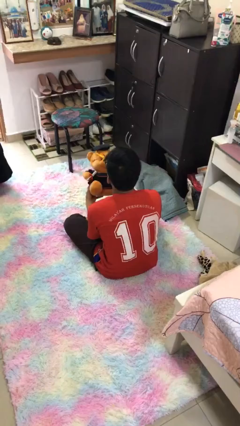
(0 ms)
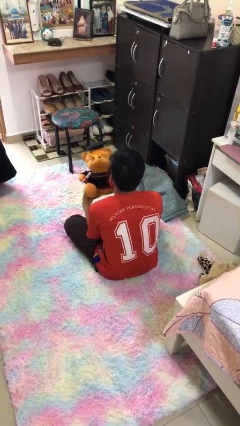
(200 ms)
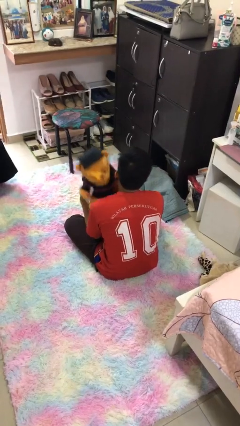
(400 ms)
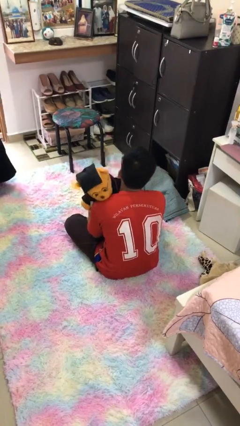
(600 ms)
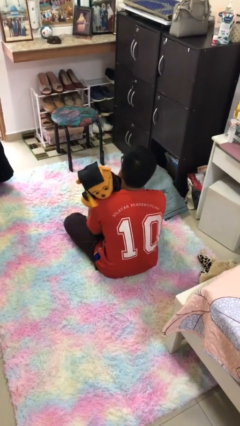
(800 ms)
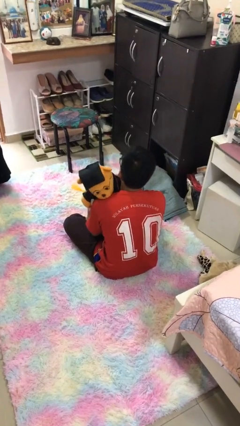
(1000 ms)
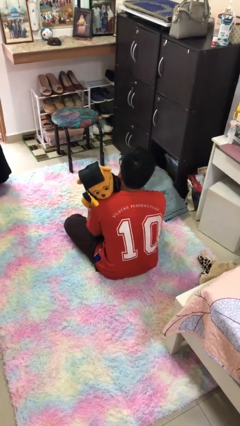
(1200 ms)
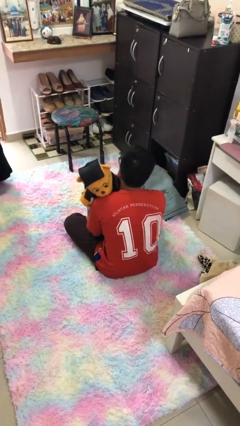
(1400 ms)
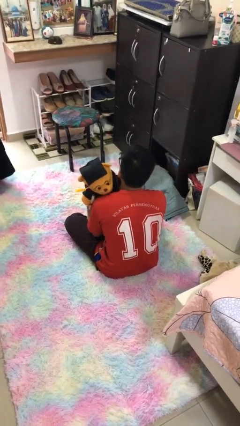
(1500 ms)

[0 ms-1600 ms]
person hugs stuffed animal

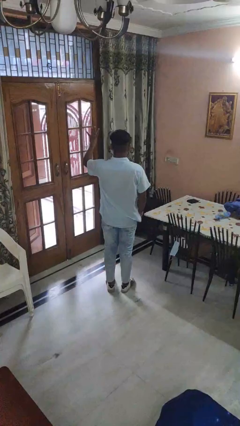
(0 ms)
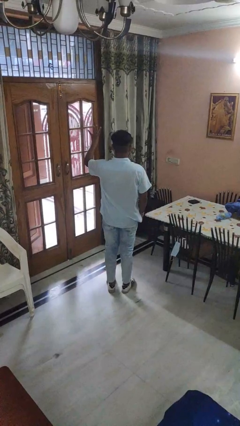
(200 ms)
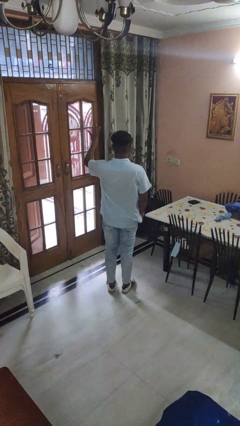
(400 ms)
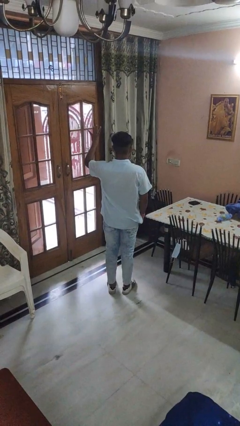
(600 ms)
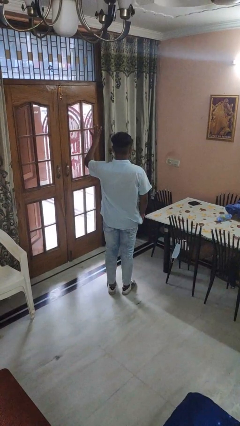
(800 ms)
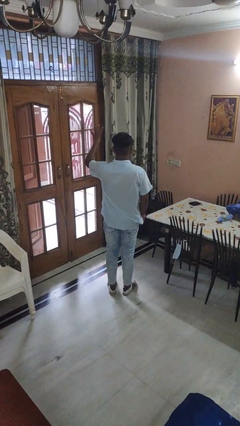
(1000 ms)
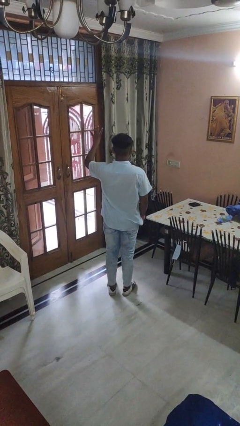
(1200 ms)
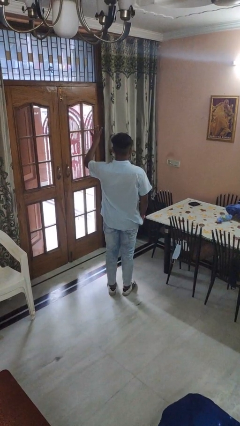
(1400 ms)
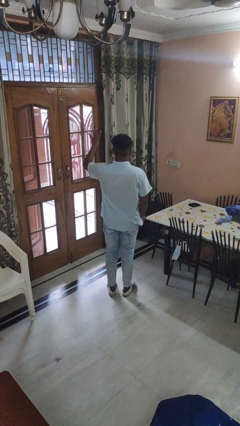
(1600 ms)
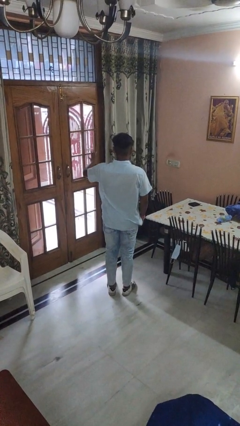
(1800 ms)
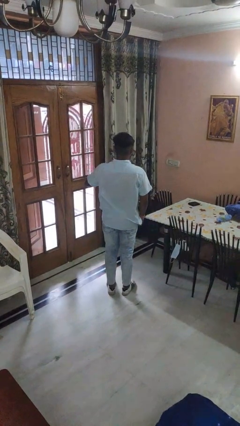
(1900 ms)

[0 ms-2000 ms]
person gestures number four

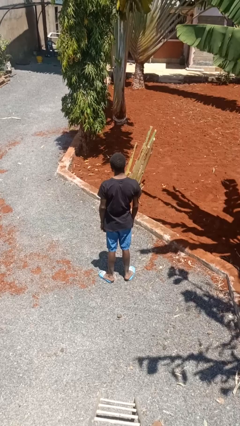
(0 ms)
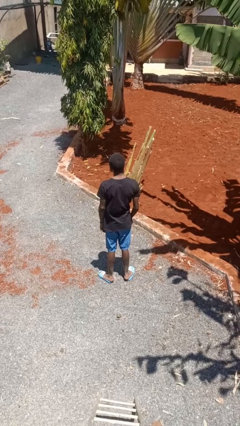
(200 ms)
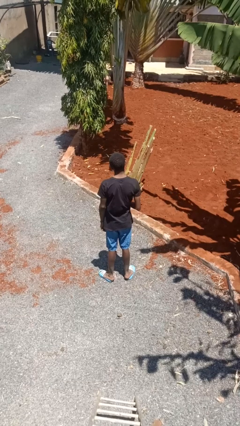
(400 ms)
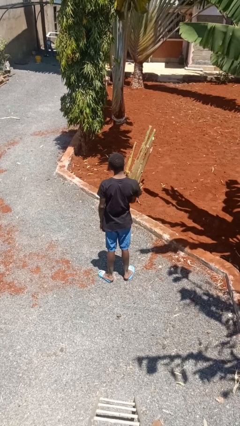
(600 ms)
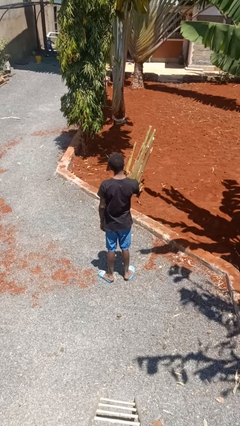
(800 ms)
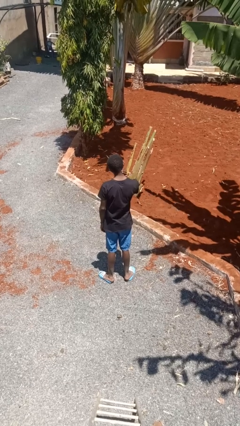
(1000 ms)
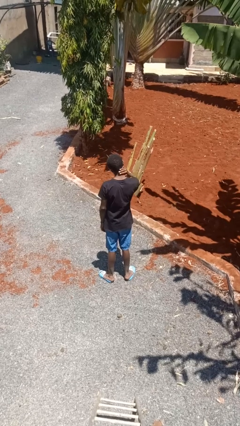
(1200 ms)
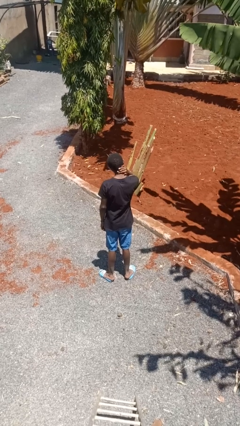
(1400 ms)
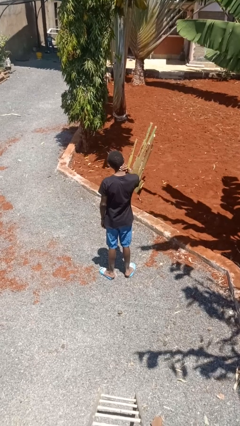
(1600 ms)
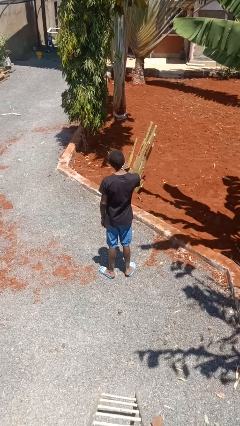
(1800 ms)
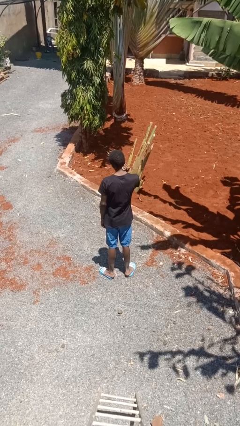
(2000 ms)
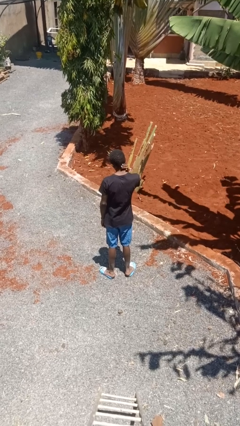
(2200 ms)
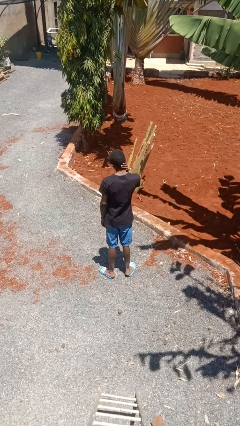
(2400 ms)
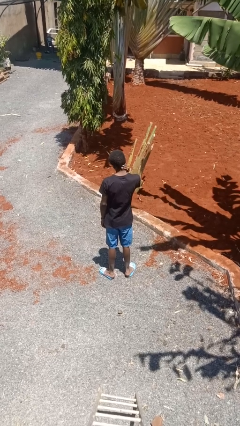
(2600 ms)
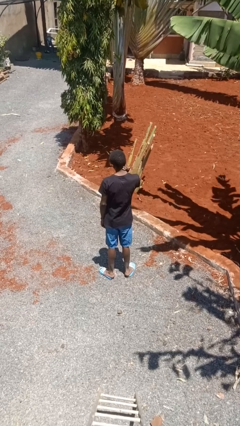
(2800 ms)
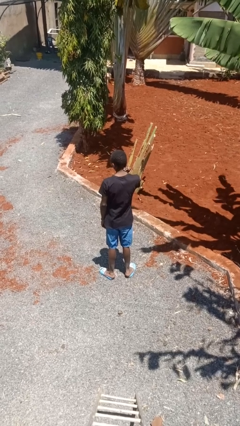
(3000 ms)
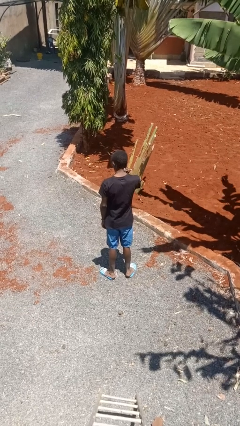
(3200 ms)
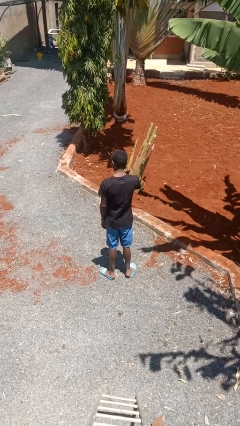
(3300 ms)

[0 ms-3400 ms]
person rubs neck

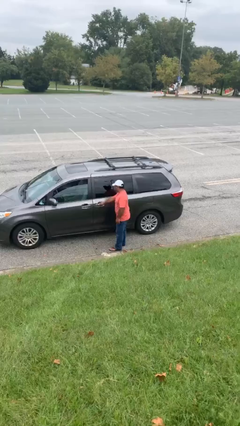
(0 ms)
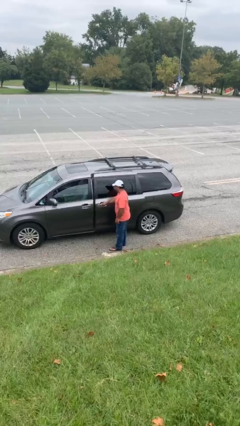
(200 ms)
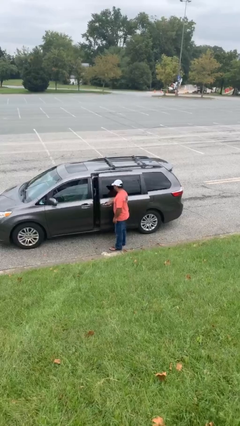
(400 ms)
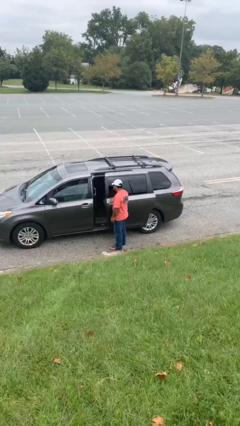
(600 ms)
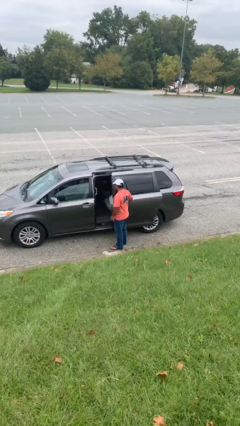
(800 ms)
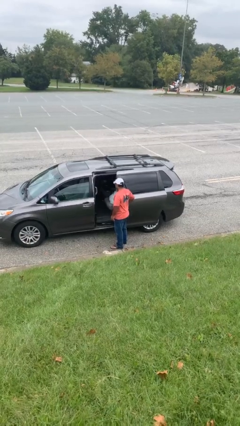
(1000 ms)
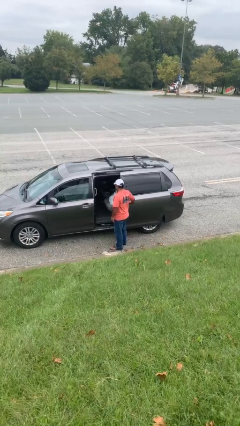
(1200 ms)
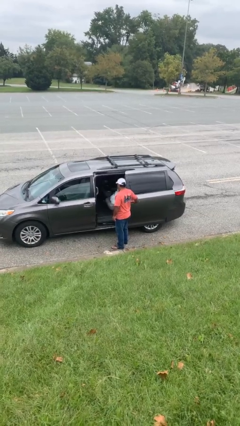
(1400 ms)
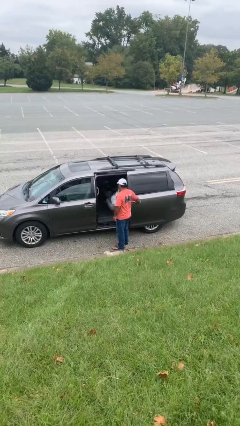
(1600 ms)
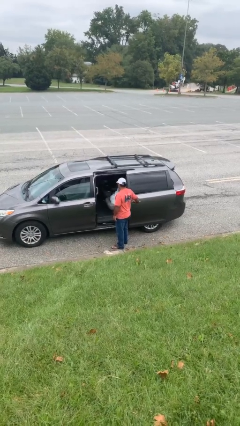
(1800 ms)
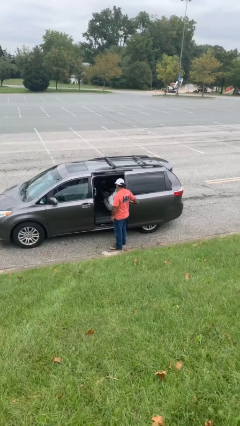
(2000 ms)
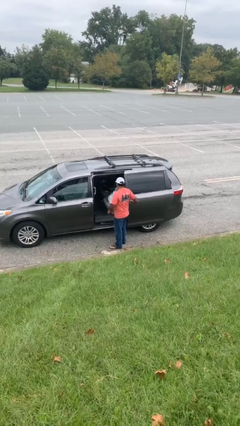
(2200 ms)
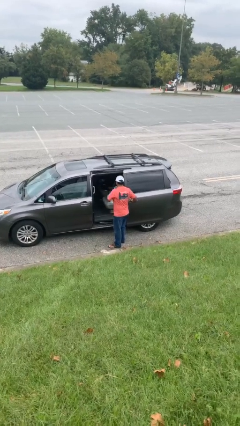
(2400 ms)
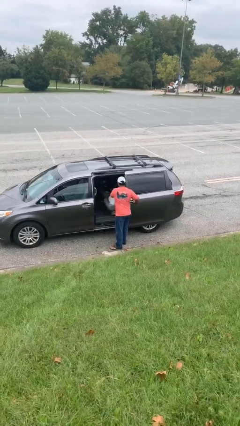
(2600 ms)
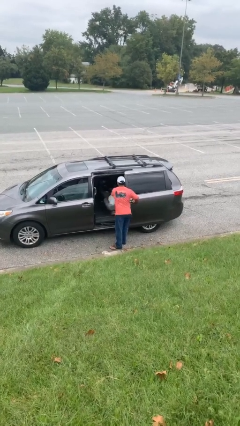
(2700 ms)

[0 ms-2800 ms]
person opens car door

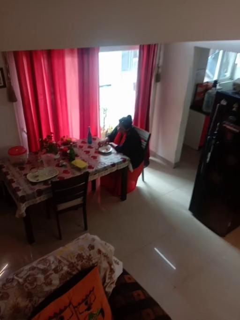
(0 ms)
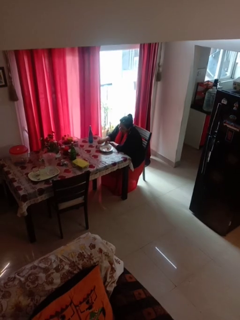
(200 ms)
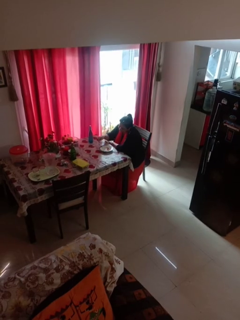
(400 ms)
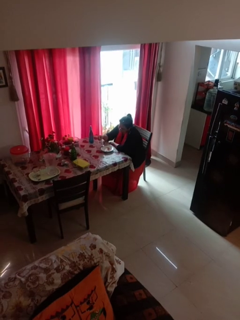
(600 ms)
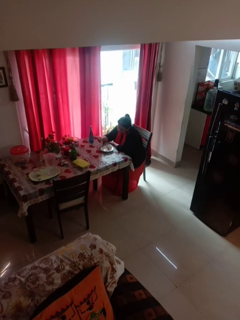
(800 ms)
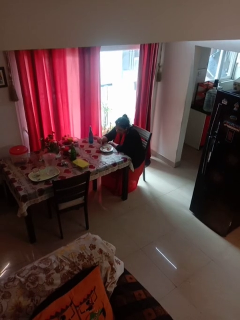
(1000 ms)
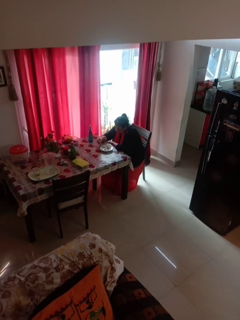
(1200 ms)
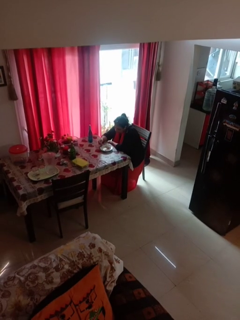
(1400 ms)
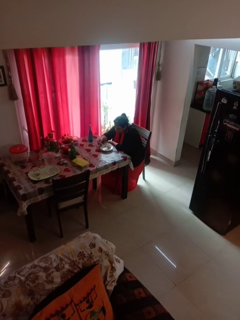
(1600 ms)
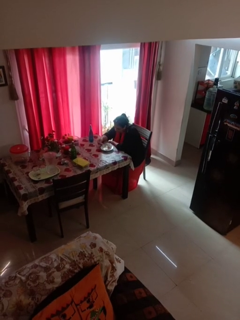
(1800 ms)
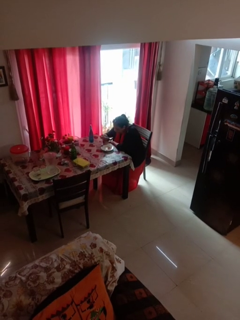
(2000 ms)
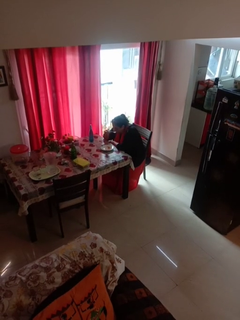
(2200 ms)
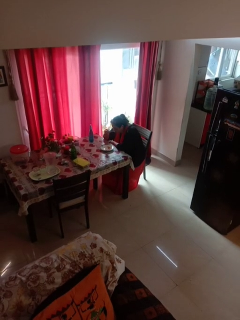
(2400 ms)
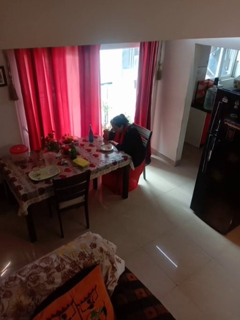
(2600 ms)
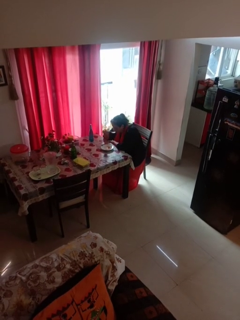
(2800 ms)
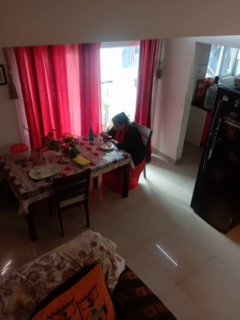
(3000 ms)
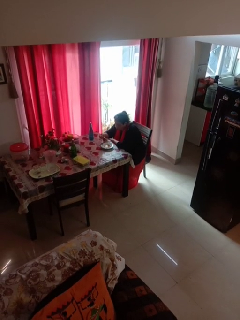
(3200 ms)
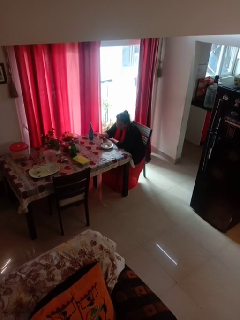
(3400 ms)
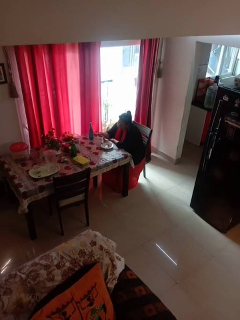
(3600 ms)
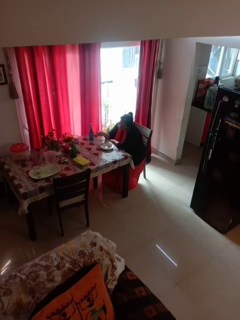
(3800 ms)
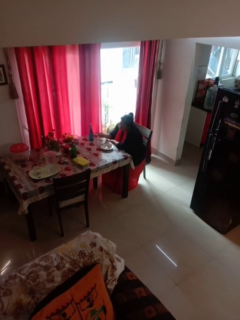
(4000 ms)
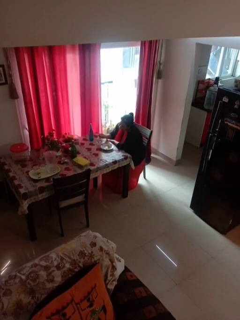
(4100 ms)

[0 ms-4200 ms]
person eats with utensil

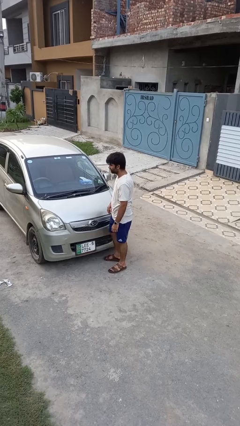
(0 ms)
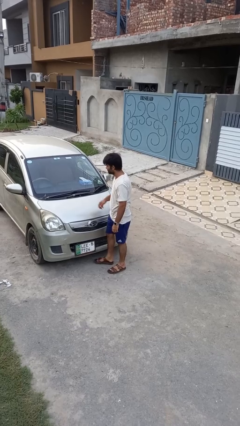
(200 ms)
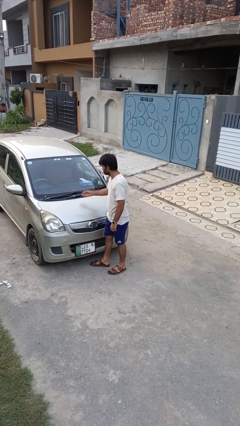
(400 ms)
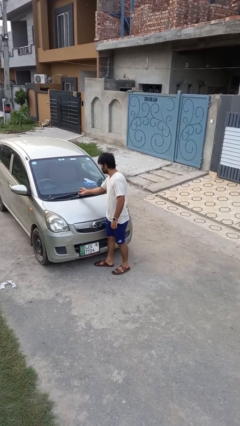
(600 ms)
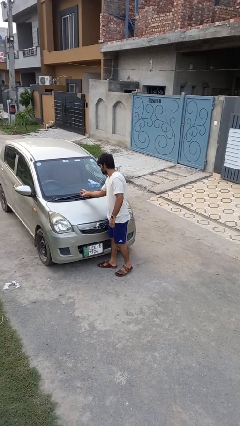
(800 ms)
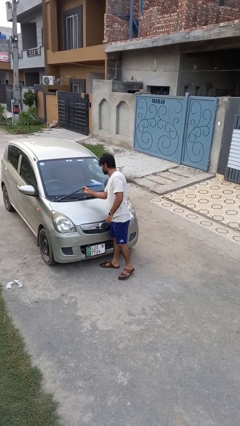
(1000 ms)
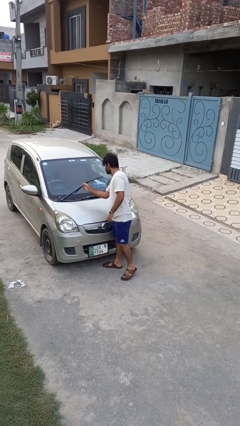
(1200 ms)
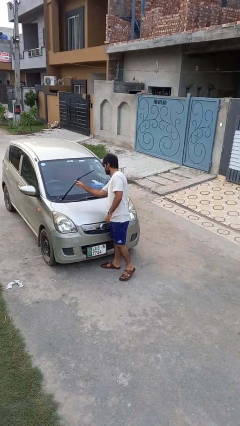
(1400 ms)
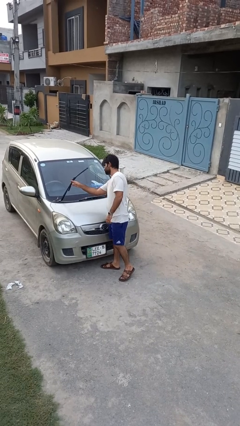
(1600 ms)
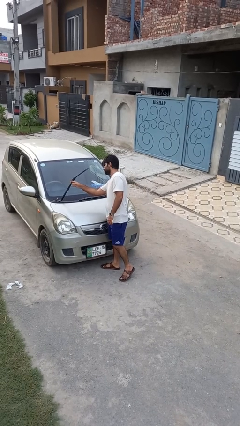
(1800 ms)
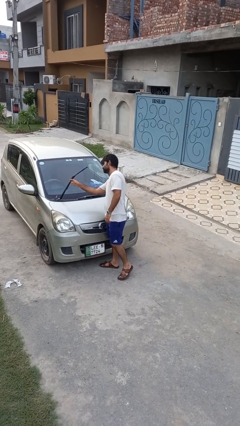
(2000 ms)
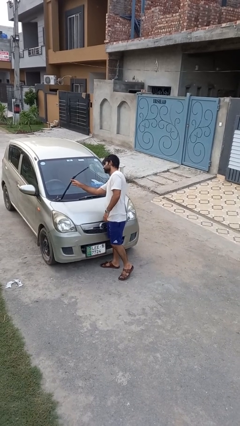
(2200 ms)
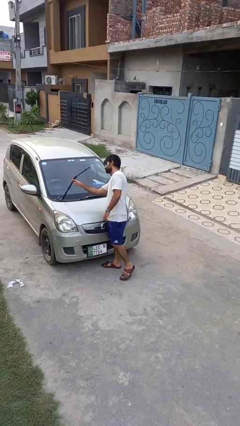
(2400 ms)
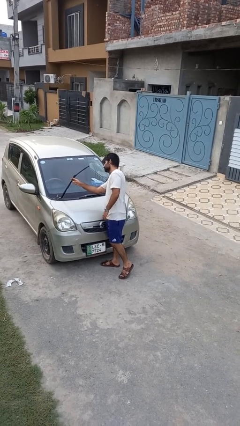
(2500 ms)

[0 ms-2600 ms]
person flips up car wipers

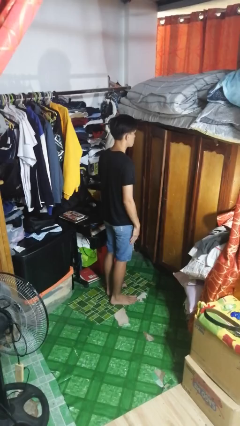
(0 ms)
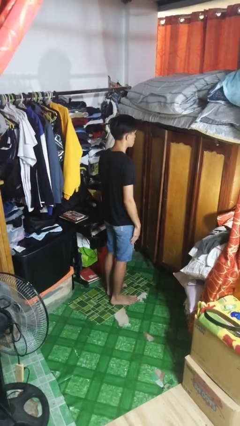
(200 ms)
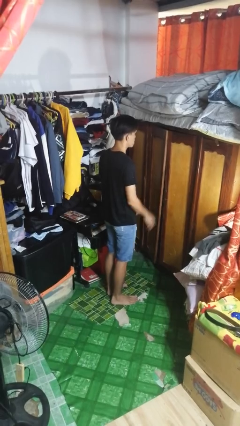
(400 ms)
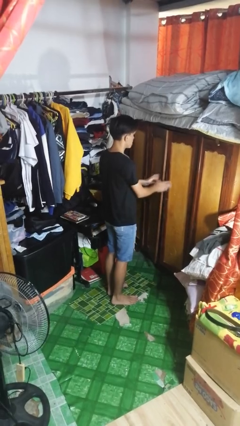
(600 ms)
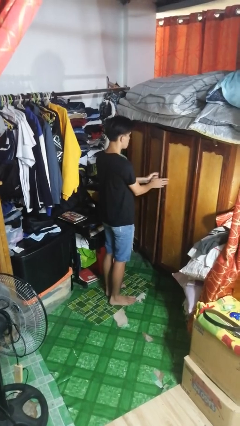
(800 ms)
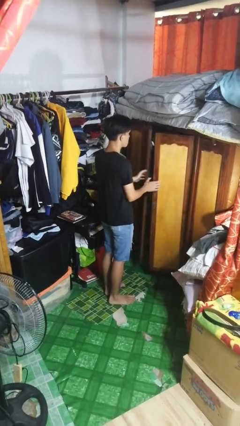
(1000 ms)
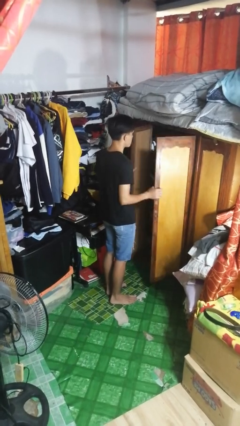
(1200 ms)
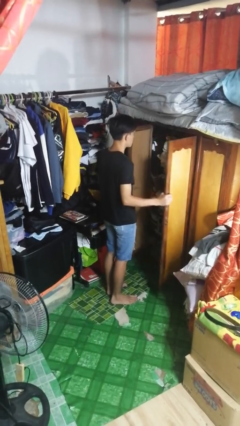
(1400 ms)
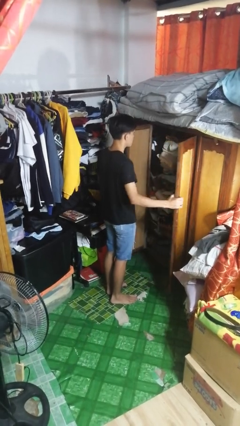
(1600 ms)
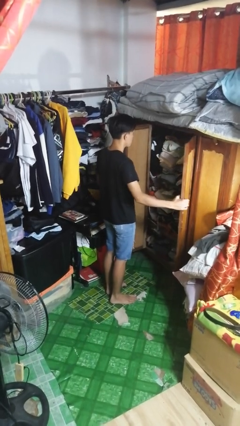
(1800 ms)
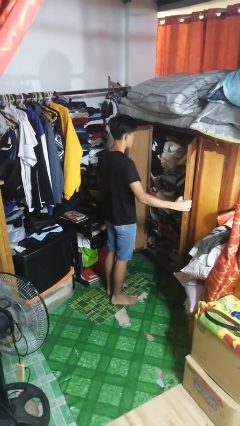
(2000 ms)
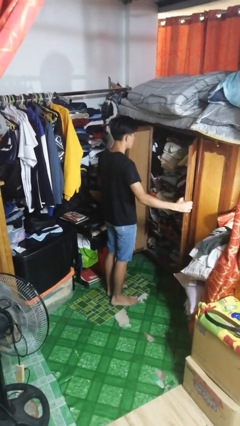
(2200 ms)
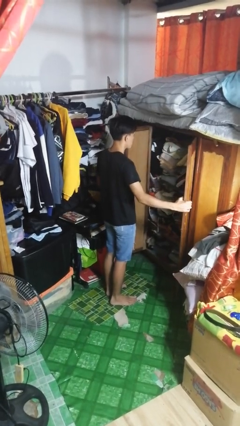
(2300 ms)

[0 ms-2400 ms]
person opens closet door
